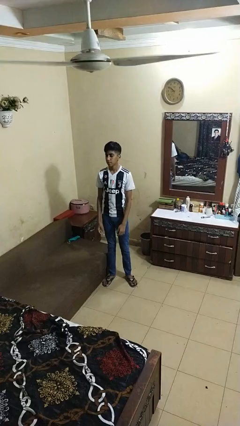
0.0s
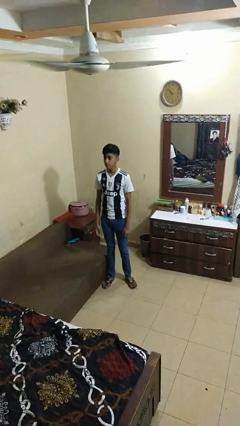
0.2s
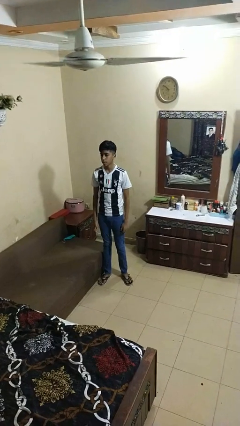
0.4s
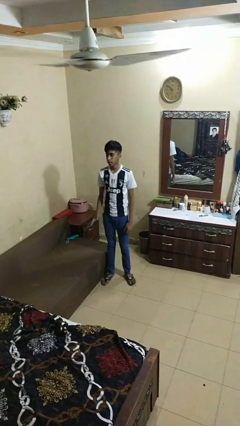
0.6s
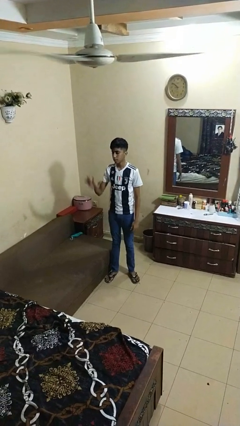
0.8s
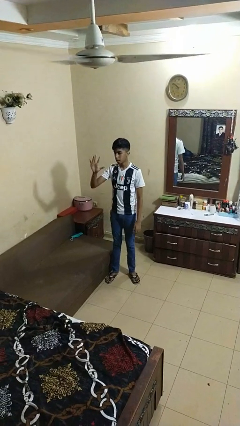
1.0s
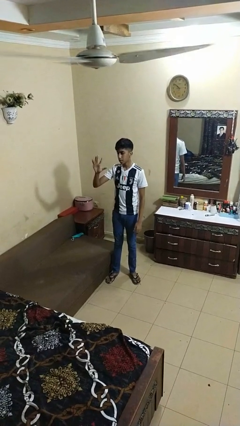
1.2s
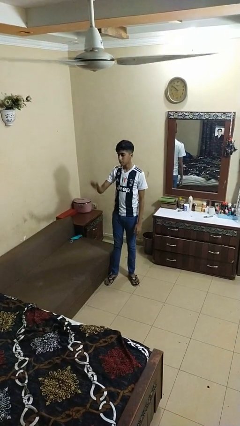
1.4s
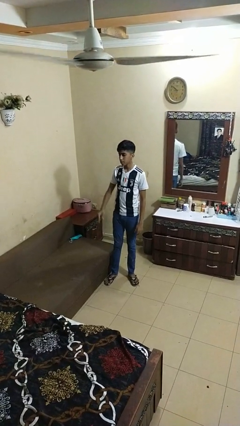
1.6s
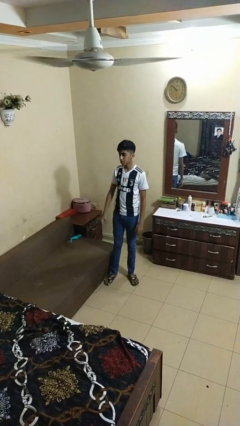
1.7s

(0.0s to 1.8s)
person gestures number five

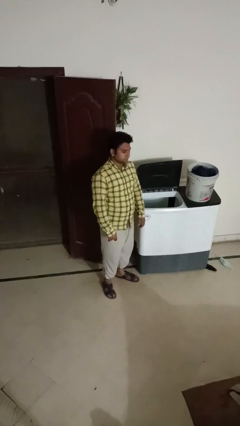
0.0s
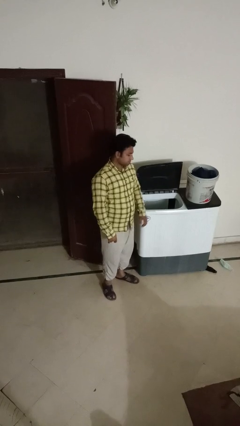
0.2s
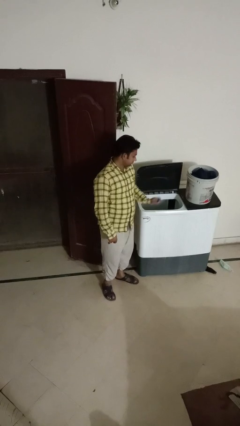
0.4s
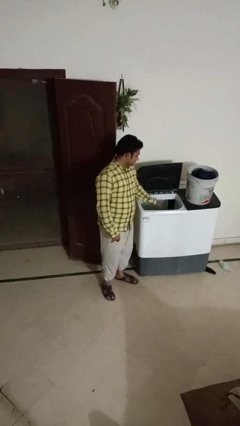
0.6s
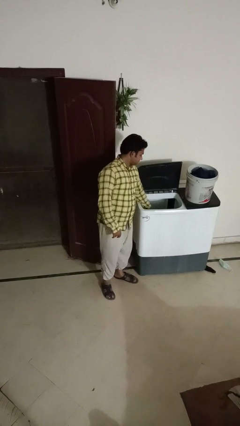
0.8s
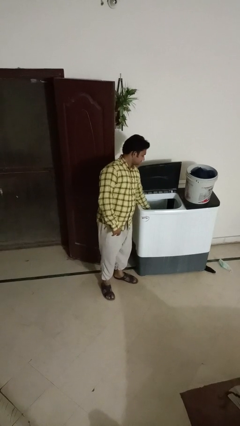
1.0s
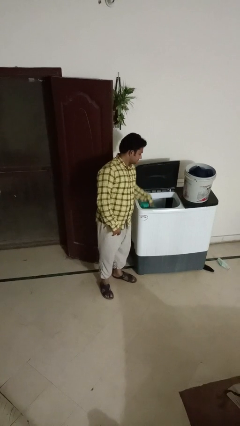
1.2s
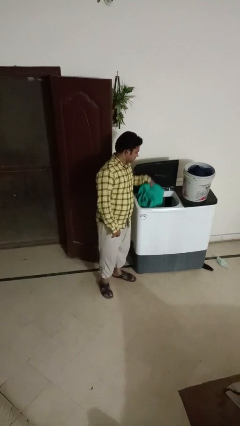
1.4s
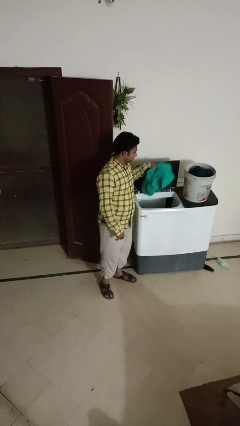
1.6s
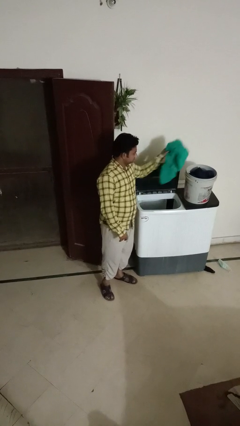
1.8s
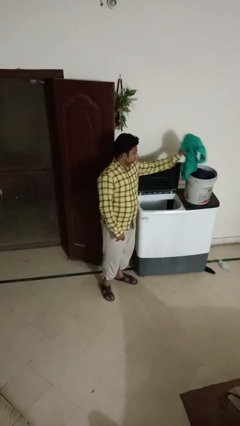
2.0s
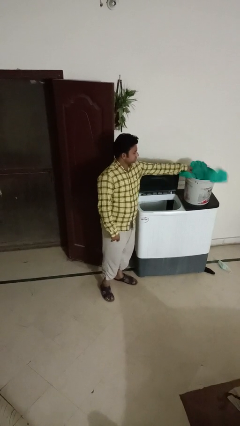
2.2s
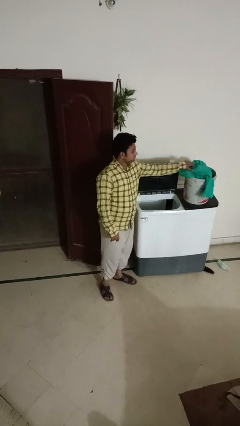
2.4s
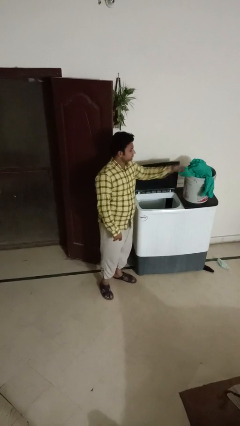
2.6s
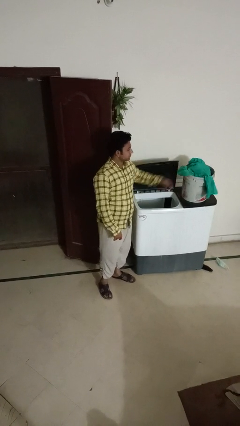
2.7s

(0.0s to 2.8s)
person unloads clotheswasher

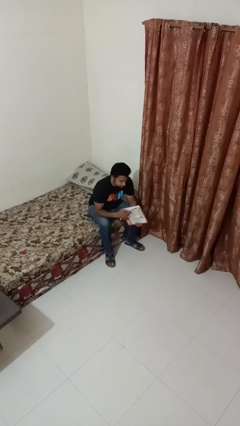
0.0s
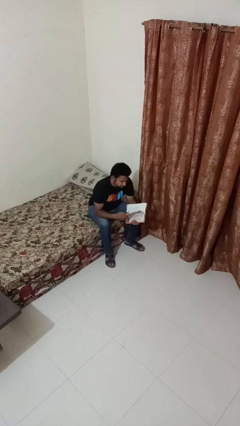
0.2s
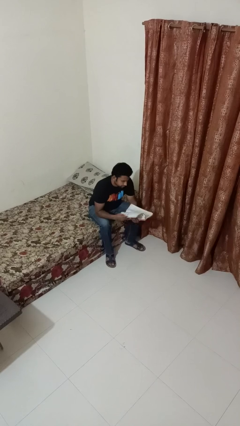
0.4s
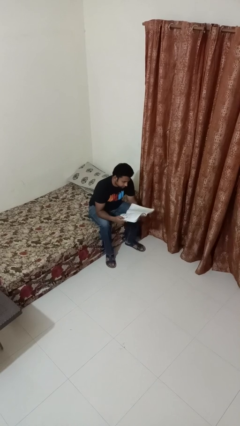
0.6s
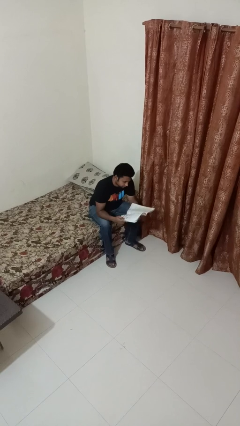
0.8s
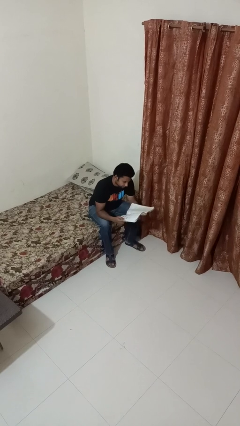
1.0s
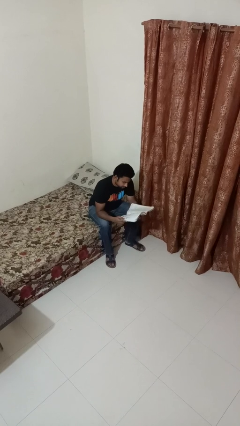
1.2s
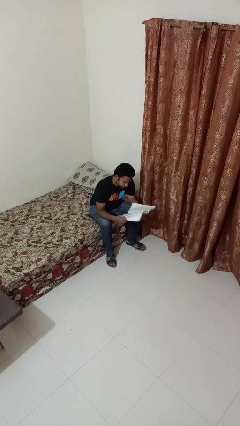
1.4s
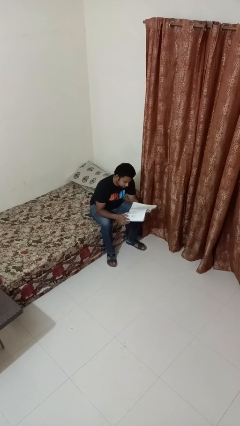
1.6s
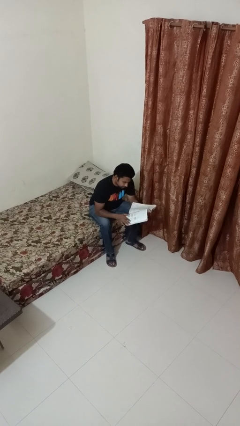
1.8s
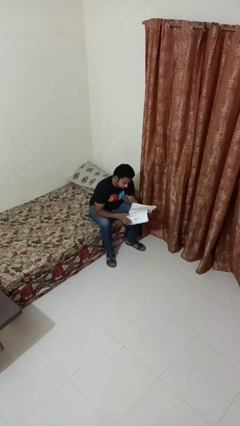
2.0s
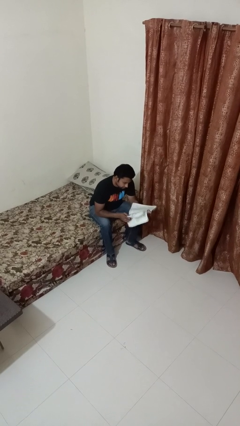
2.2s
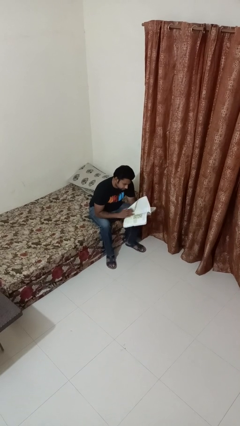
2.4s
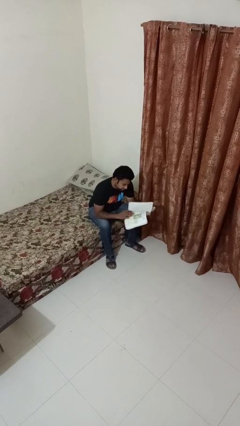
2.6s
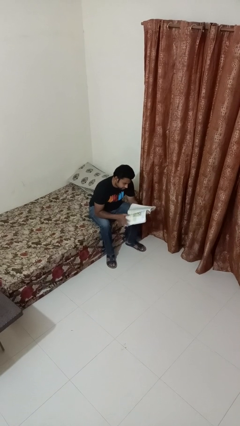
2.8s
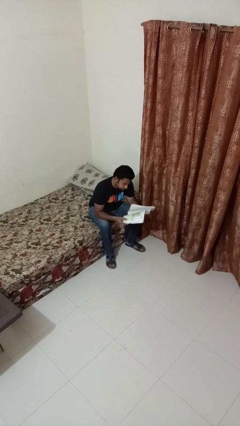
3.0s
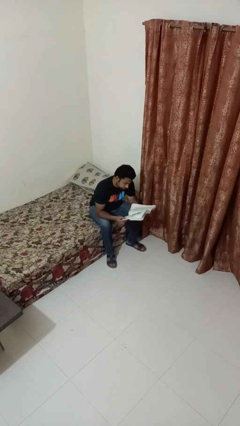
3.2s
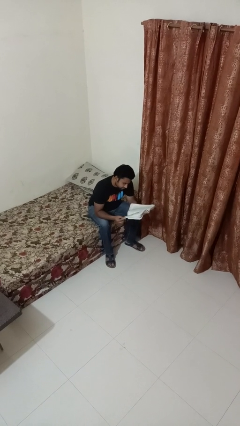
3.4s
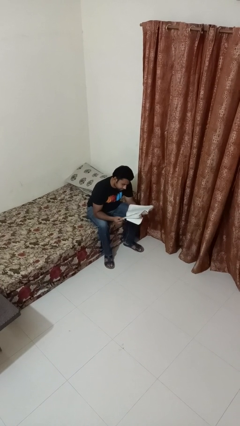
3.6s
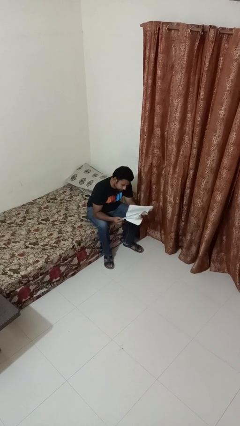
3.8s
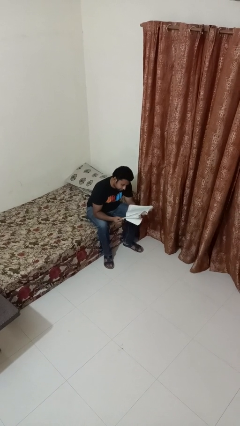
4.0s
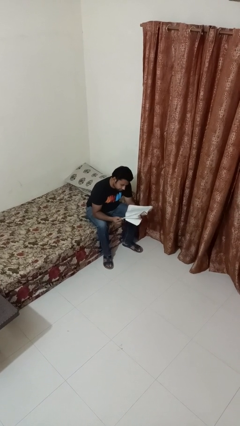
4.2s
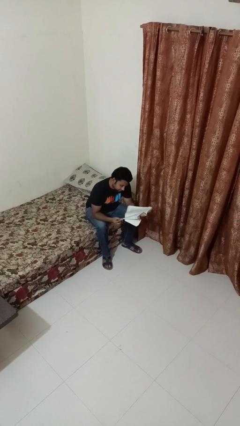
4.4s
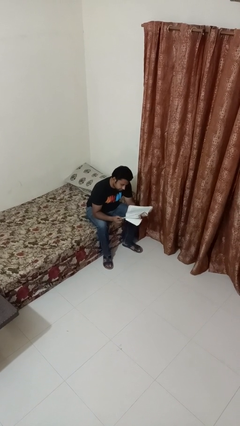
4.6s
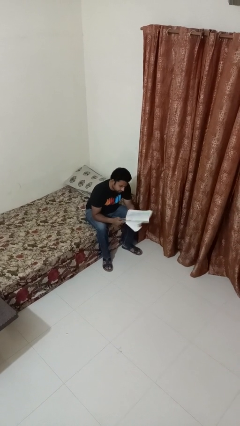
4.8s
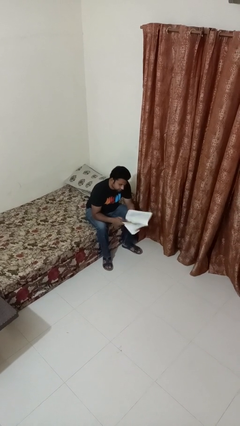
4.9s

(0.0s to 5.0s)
person reads book

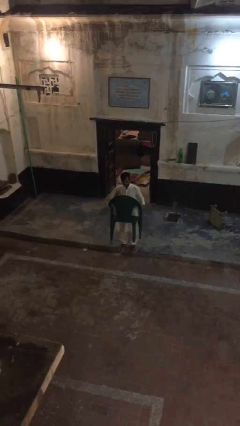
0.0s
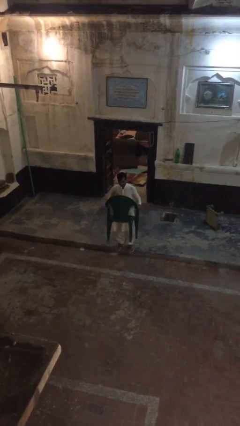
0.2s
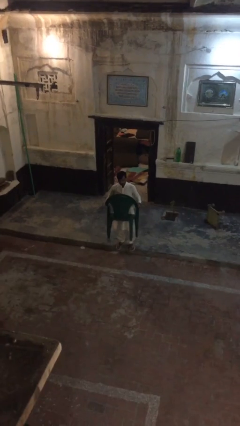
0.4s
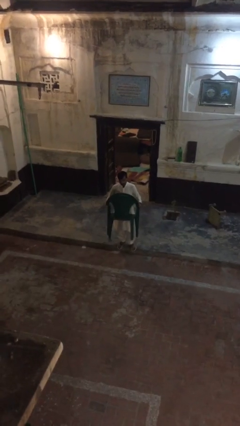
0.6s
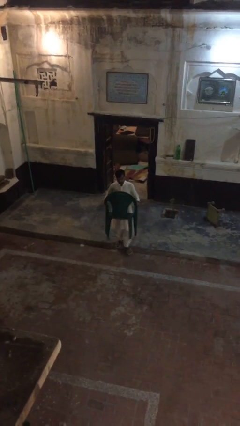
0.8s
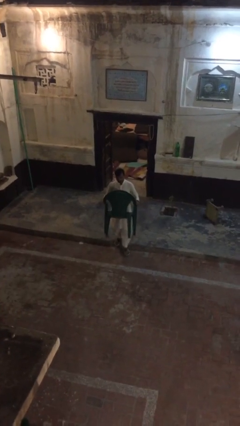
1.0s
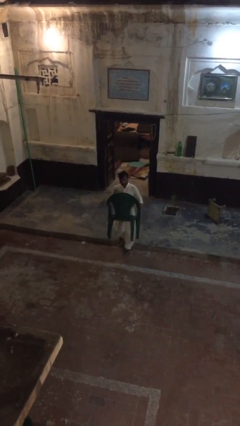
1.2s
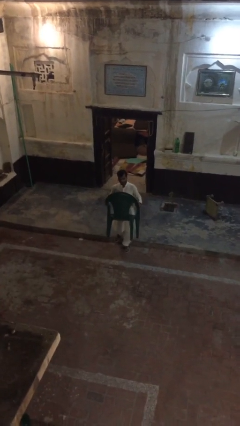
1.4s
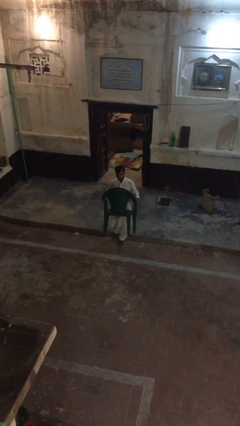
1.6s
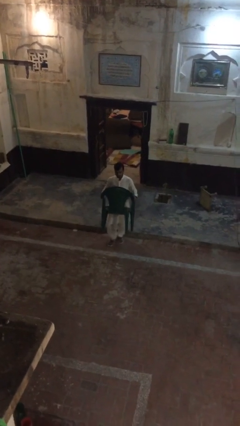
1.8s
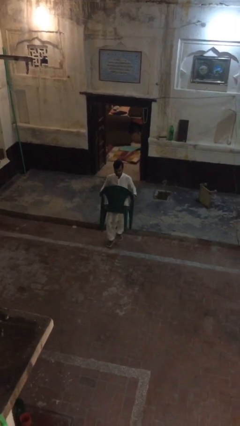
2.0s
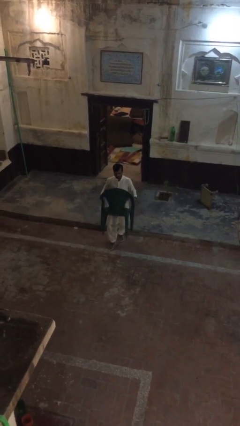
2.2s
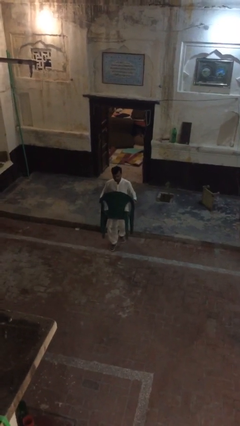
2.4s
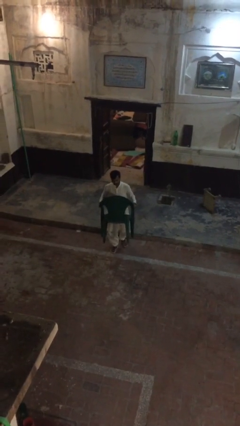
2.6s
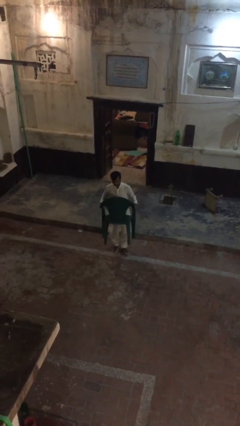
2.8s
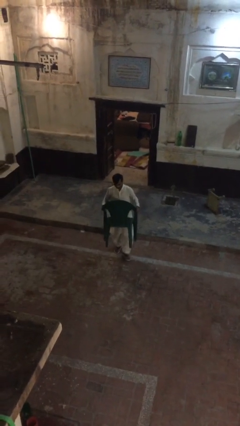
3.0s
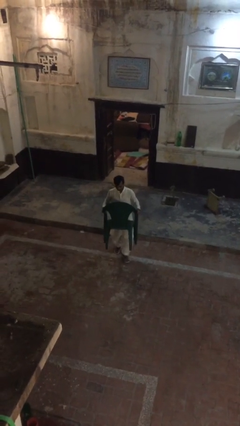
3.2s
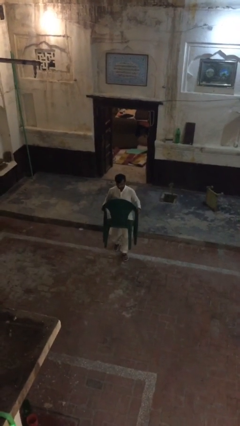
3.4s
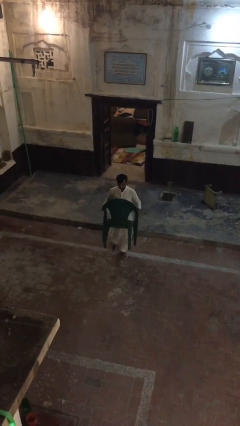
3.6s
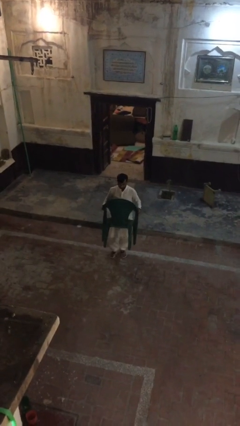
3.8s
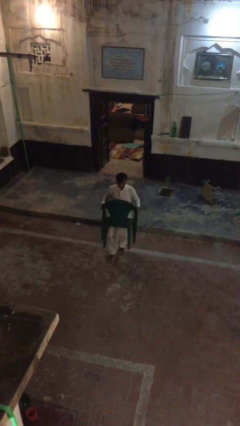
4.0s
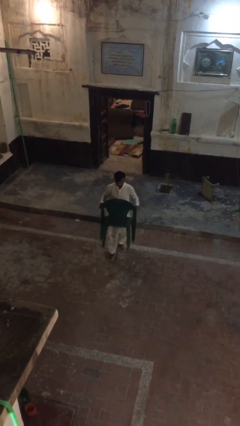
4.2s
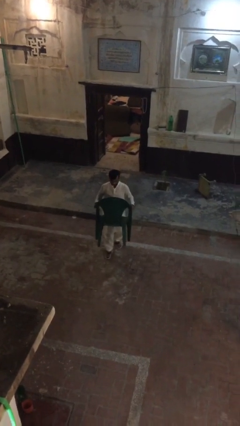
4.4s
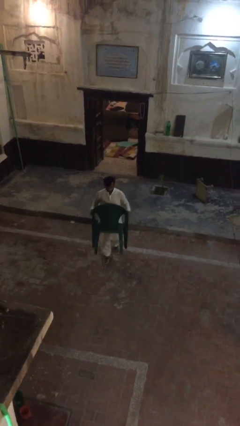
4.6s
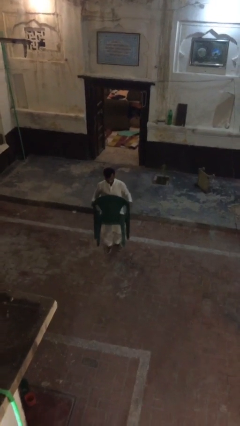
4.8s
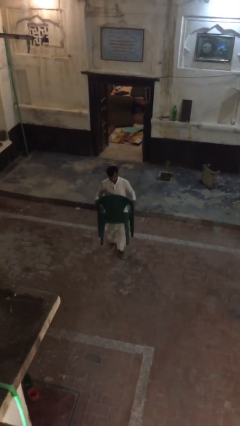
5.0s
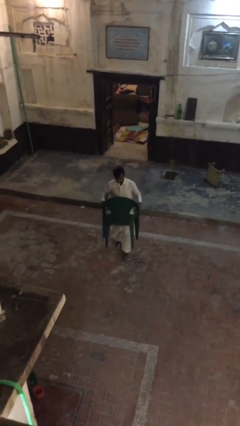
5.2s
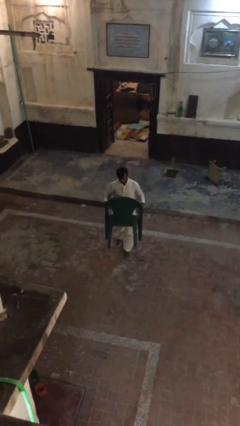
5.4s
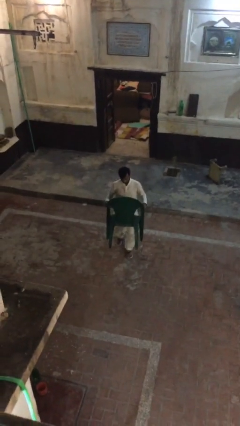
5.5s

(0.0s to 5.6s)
person carries heavy object

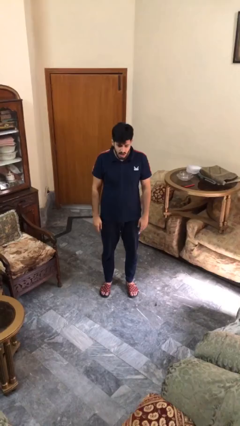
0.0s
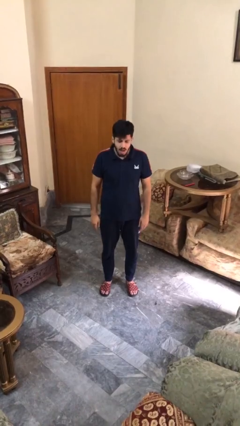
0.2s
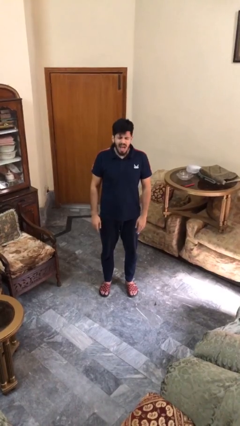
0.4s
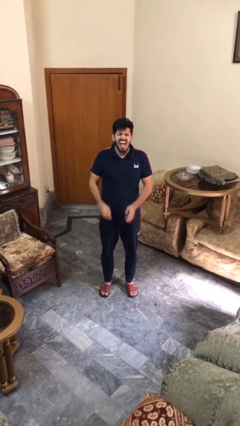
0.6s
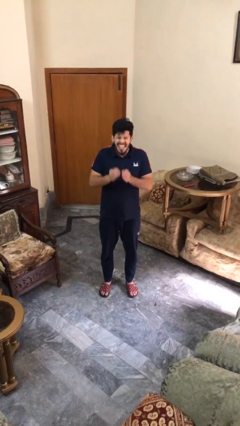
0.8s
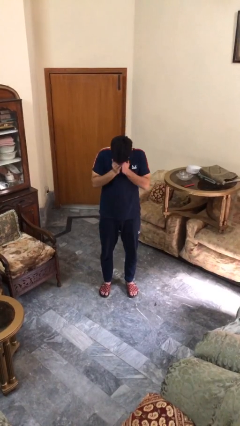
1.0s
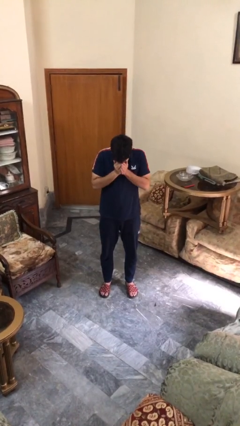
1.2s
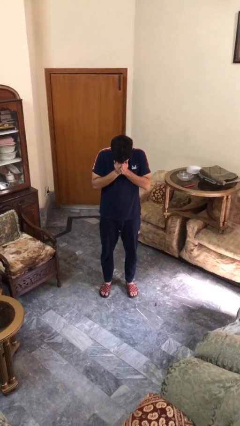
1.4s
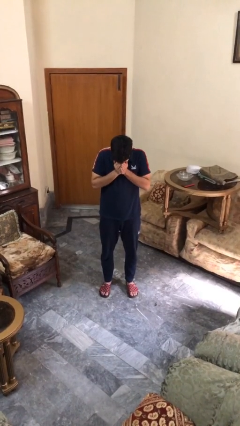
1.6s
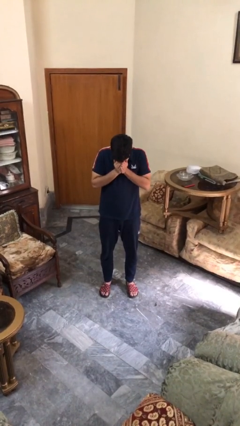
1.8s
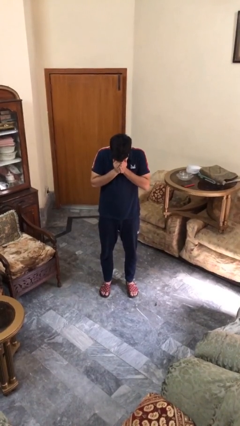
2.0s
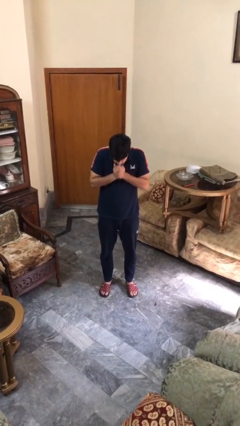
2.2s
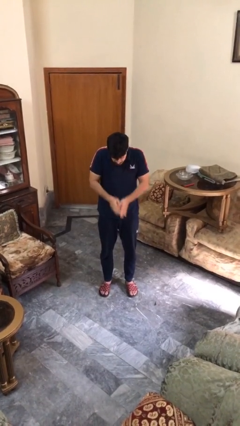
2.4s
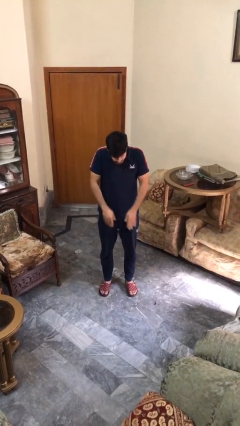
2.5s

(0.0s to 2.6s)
person sneezes into hand
